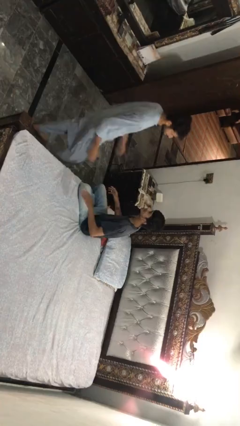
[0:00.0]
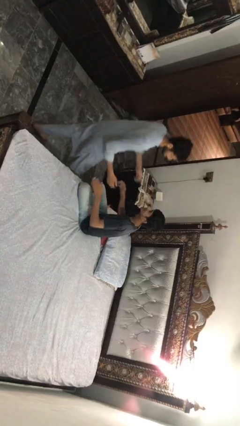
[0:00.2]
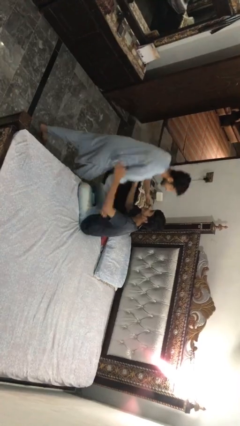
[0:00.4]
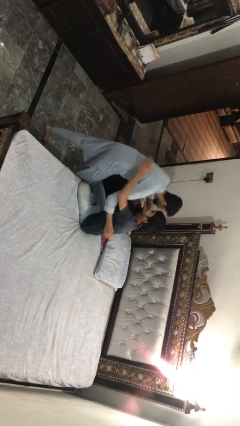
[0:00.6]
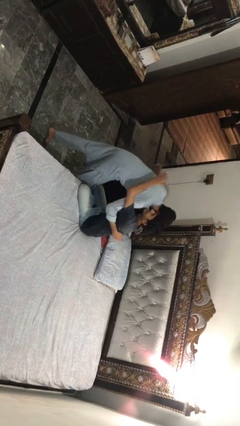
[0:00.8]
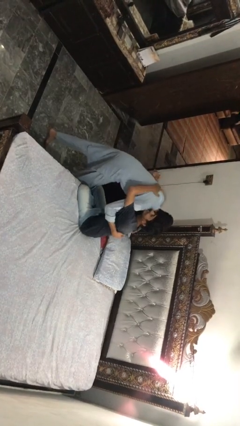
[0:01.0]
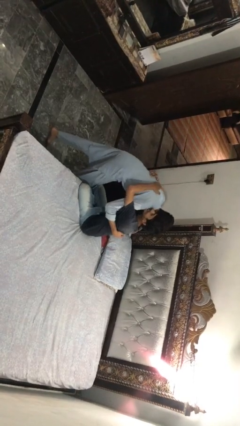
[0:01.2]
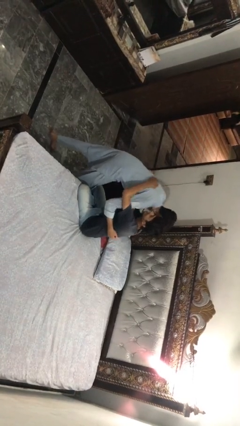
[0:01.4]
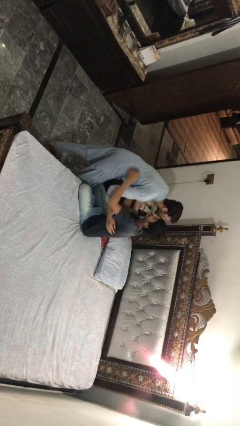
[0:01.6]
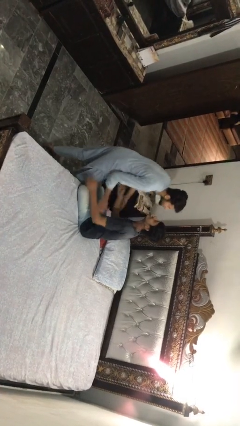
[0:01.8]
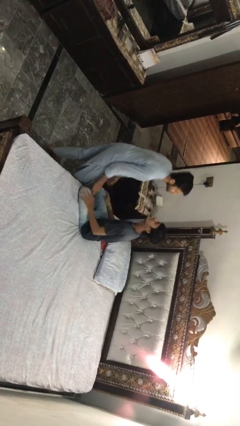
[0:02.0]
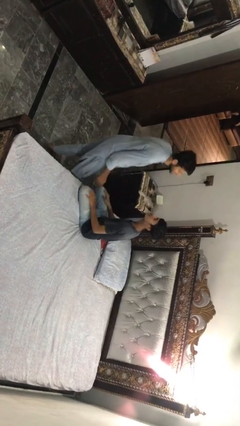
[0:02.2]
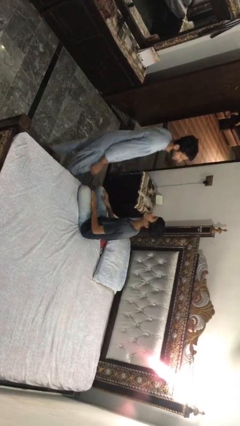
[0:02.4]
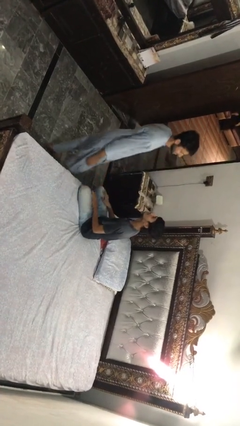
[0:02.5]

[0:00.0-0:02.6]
person embraces person

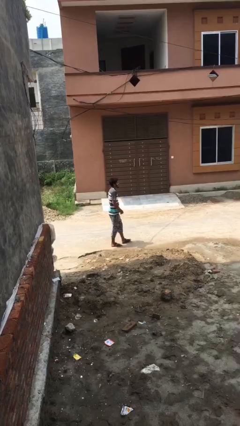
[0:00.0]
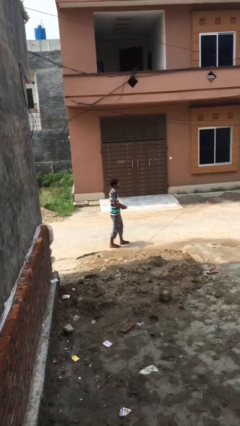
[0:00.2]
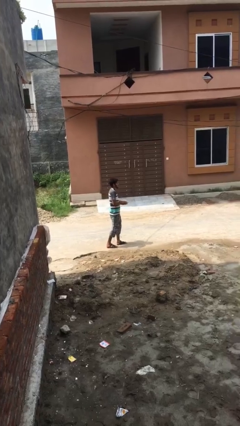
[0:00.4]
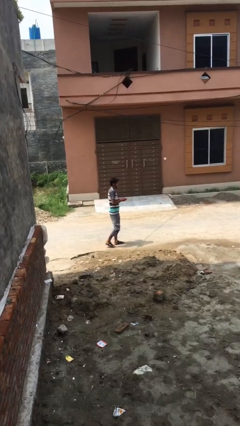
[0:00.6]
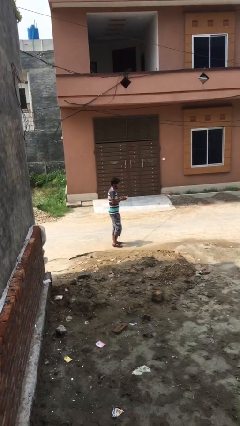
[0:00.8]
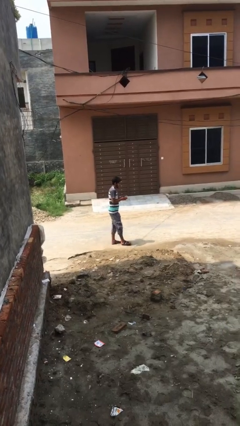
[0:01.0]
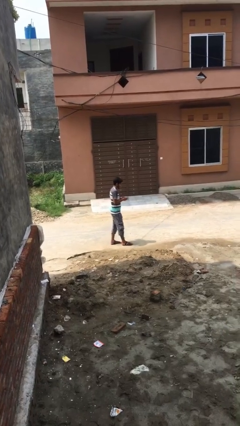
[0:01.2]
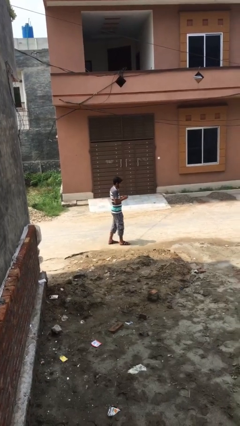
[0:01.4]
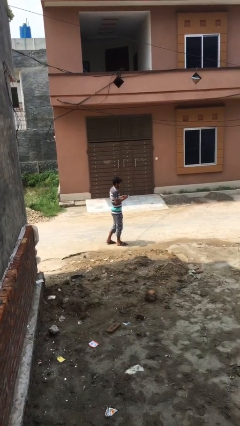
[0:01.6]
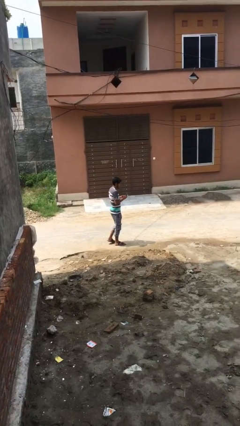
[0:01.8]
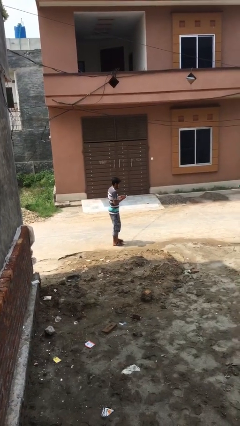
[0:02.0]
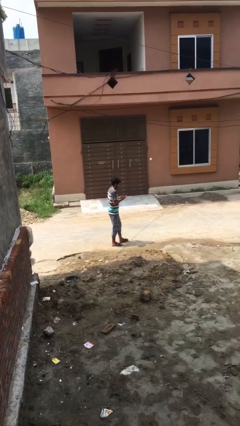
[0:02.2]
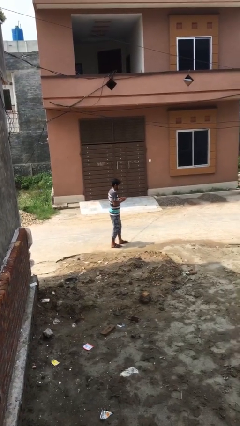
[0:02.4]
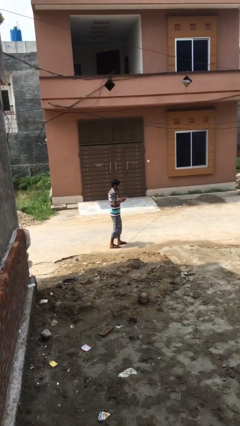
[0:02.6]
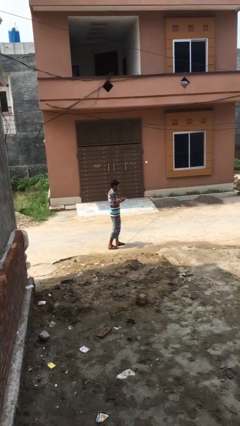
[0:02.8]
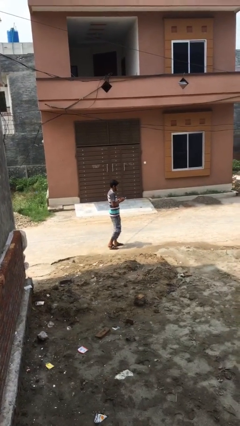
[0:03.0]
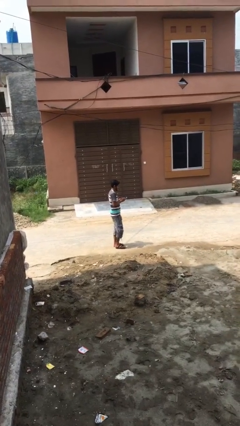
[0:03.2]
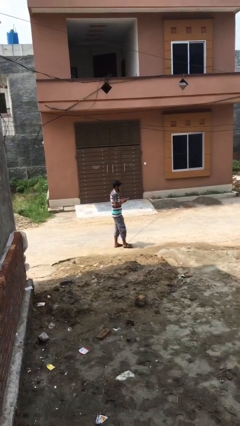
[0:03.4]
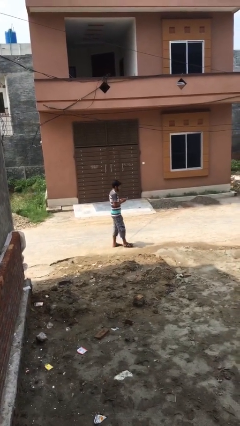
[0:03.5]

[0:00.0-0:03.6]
person texts on phone

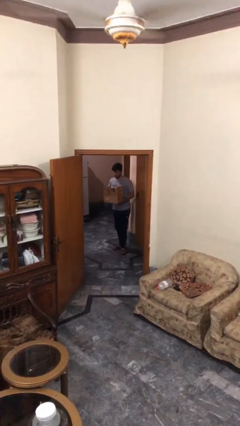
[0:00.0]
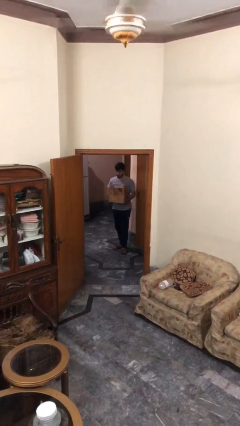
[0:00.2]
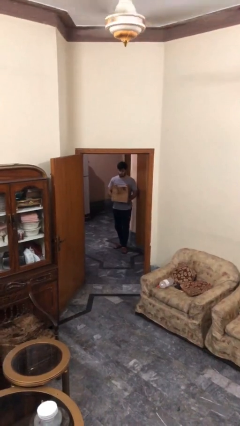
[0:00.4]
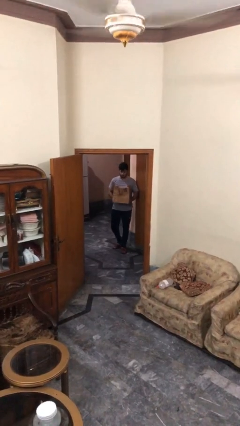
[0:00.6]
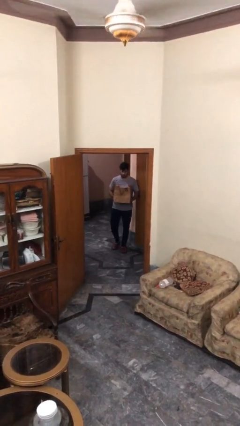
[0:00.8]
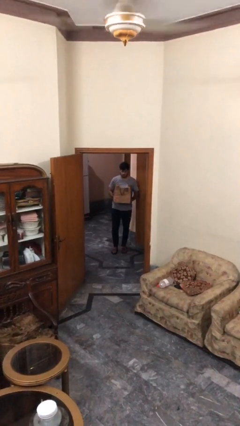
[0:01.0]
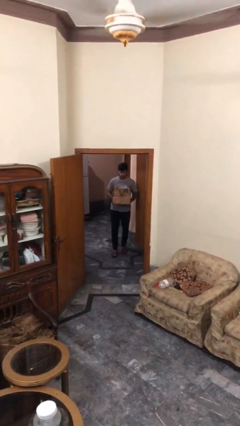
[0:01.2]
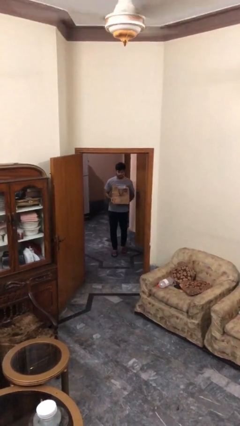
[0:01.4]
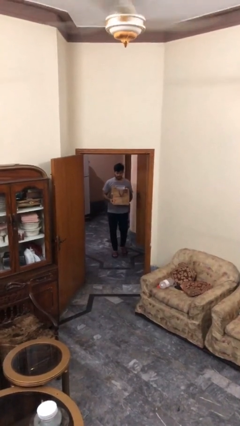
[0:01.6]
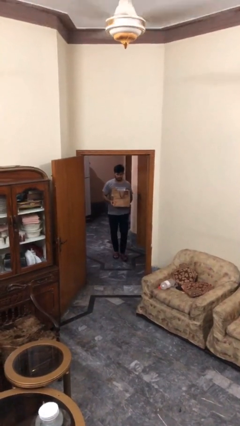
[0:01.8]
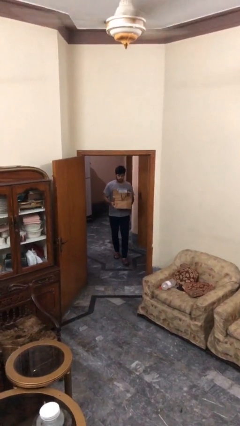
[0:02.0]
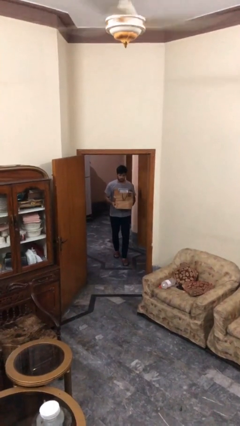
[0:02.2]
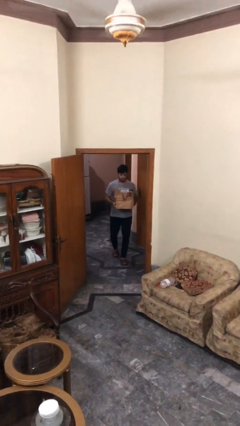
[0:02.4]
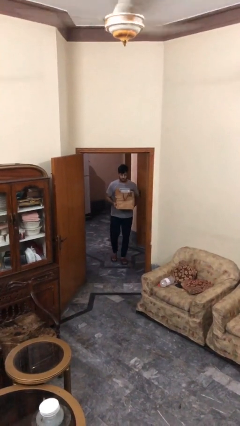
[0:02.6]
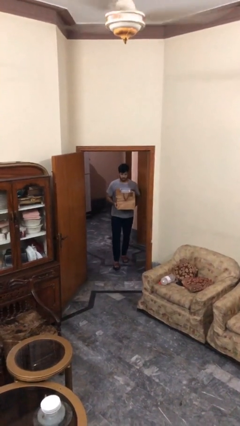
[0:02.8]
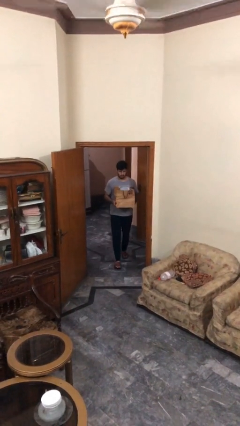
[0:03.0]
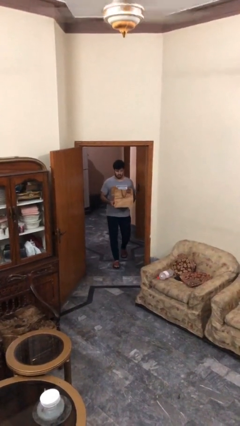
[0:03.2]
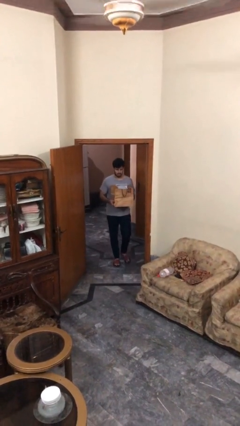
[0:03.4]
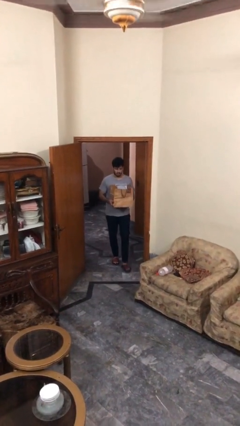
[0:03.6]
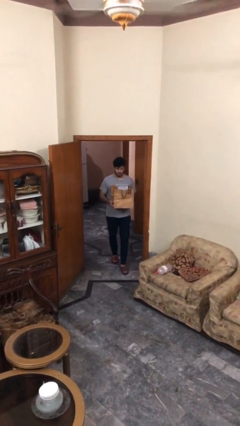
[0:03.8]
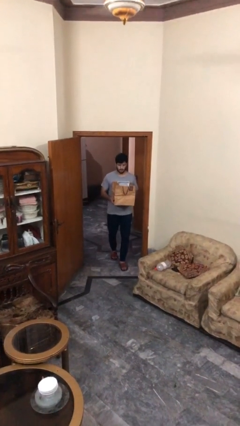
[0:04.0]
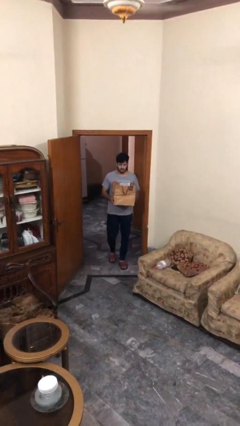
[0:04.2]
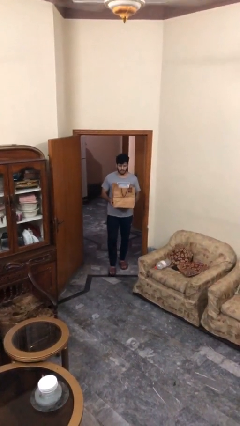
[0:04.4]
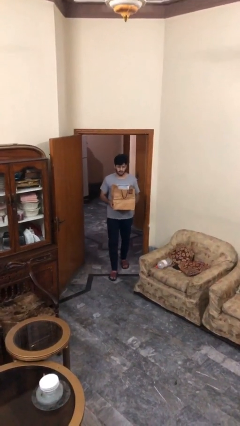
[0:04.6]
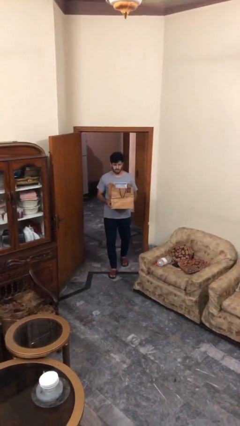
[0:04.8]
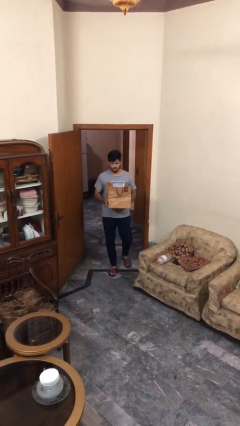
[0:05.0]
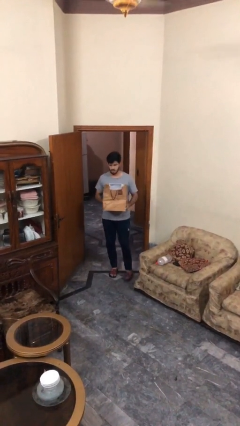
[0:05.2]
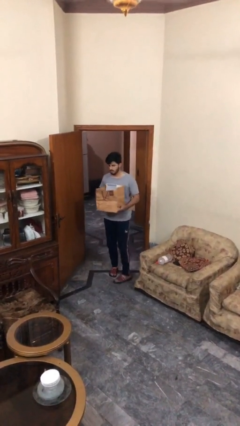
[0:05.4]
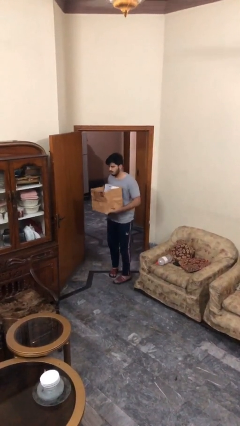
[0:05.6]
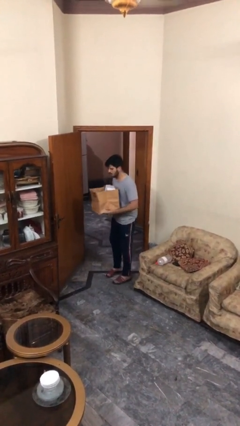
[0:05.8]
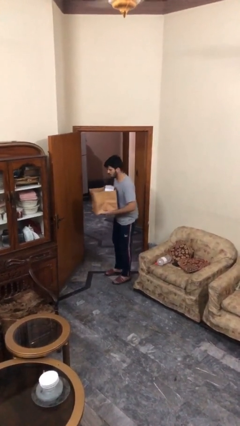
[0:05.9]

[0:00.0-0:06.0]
person carries groceries

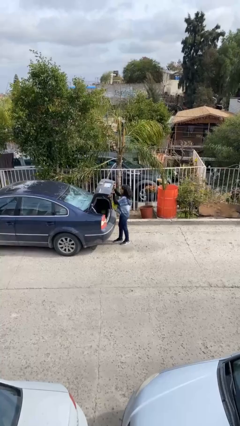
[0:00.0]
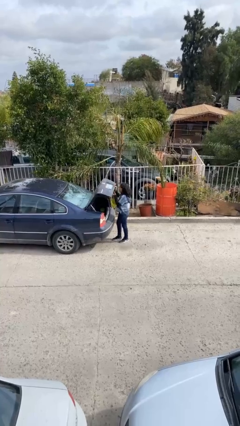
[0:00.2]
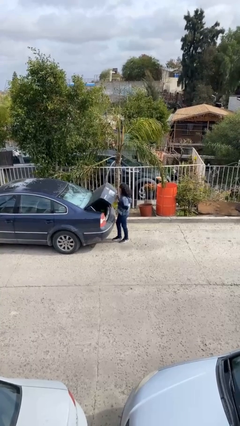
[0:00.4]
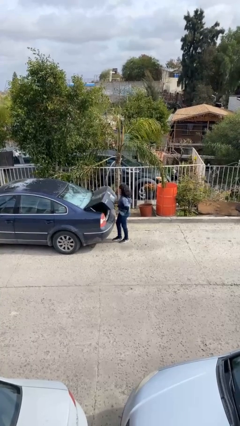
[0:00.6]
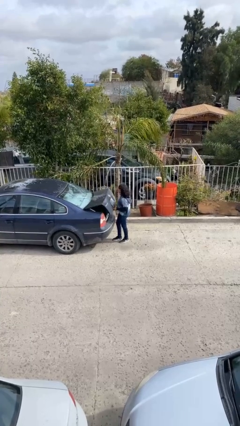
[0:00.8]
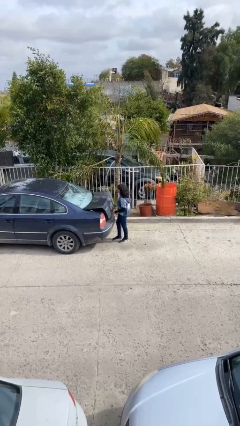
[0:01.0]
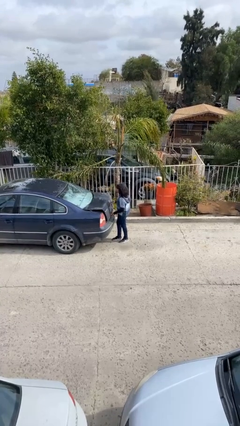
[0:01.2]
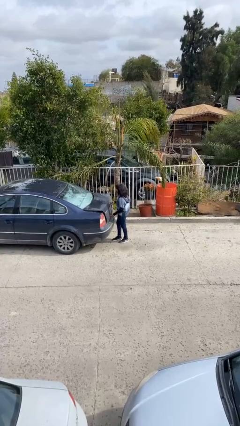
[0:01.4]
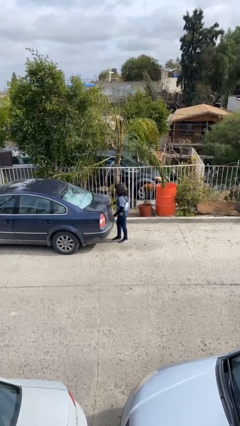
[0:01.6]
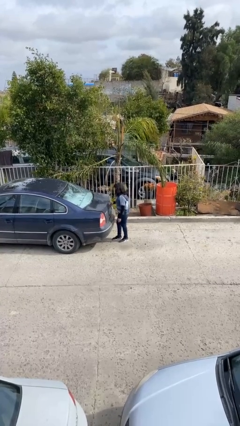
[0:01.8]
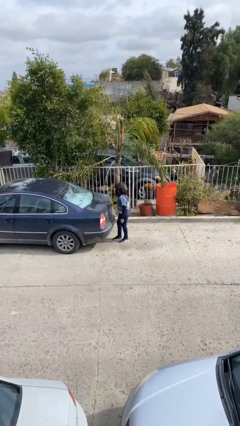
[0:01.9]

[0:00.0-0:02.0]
person closes car trunk

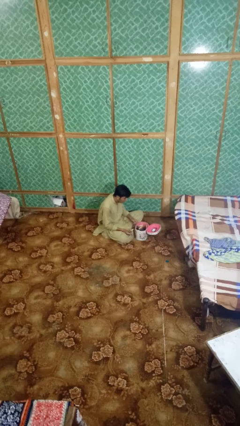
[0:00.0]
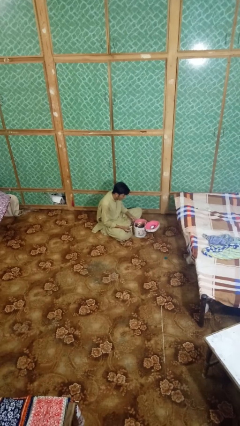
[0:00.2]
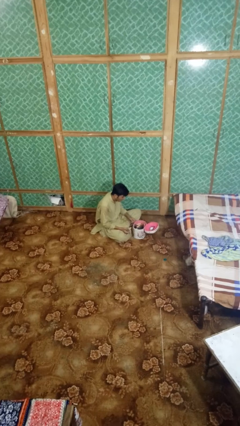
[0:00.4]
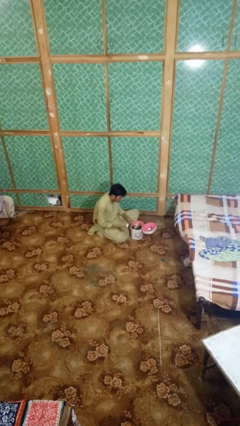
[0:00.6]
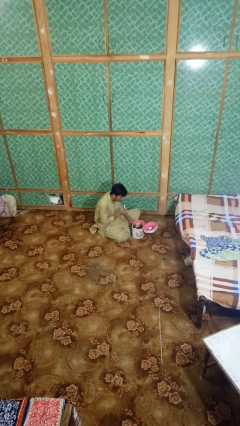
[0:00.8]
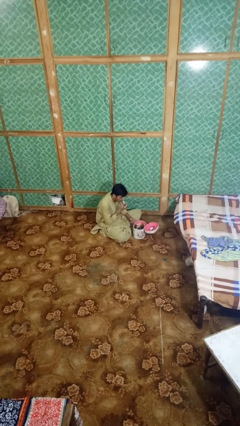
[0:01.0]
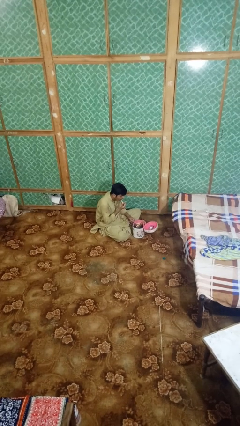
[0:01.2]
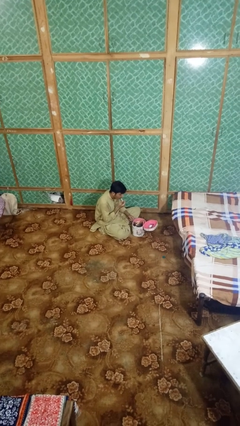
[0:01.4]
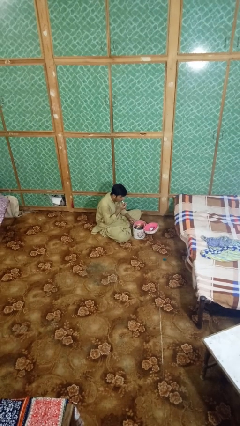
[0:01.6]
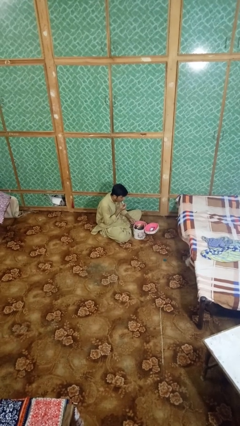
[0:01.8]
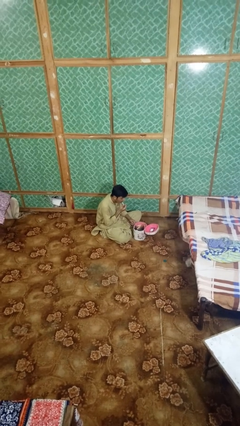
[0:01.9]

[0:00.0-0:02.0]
person applies lip makeup

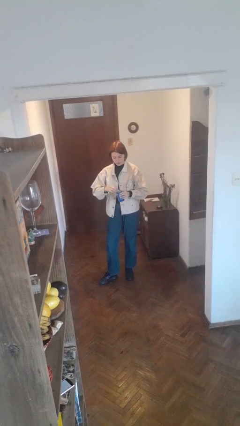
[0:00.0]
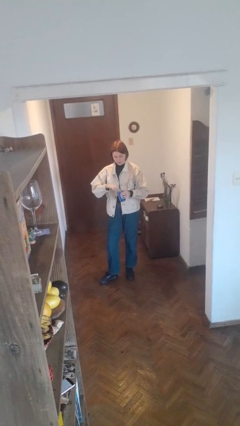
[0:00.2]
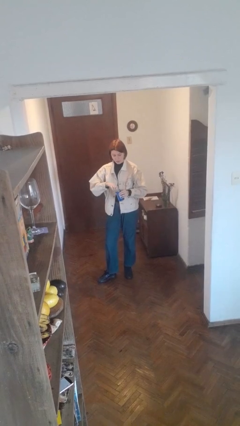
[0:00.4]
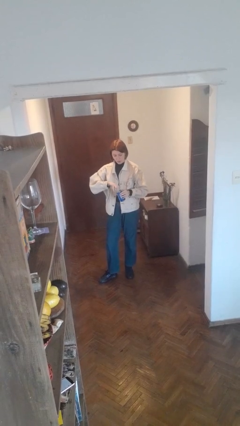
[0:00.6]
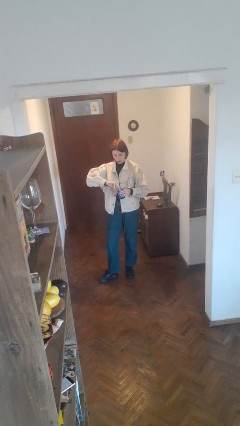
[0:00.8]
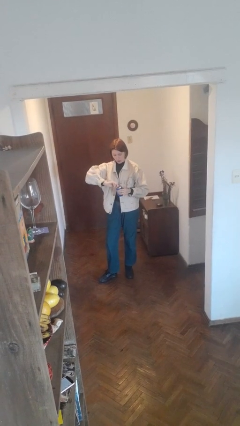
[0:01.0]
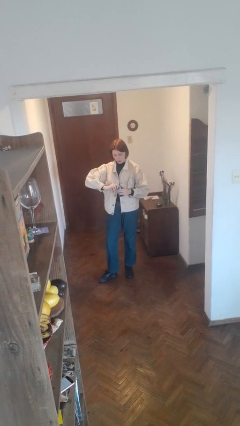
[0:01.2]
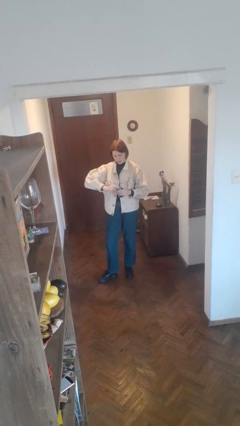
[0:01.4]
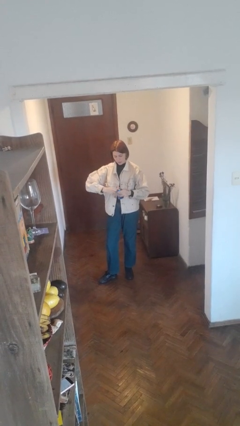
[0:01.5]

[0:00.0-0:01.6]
person opens beverage can
